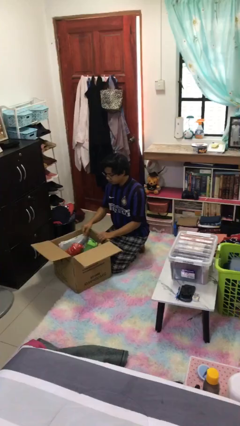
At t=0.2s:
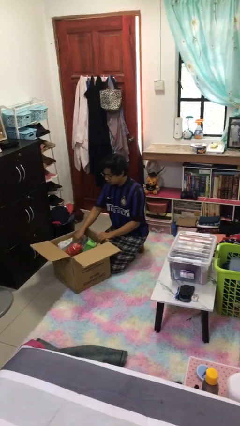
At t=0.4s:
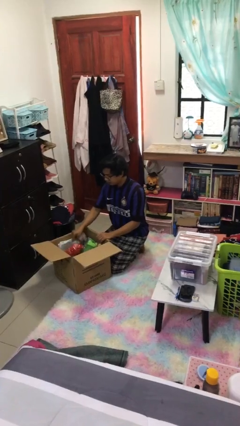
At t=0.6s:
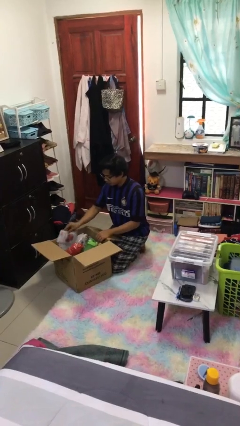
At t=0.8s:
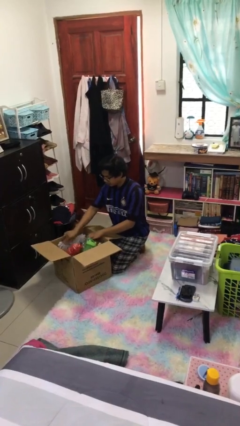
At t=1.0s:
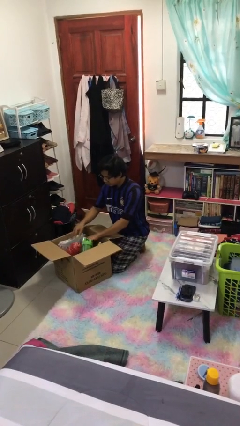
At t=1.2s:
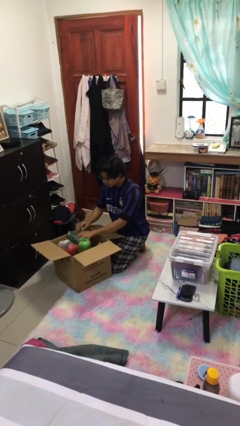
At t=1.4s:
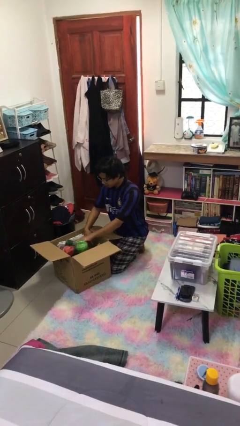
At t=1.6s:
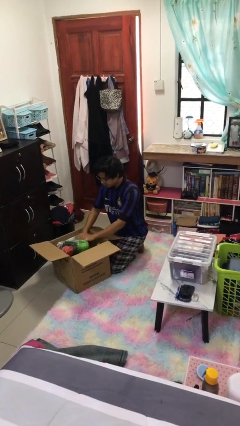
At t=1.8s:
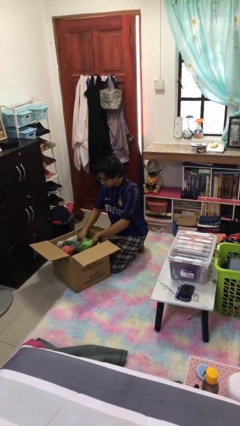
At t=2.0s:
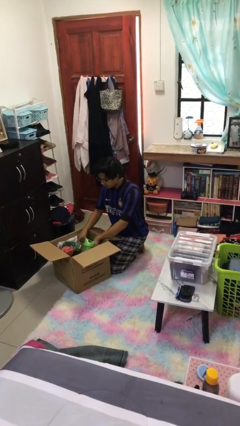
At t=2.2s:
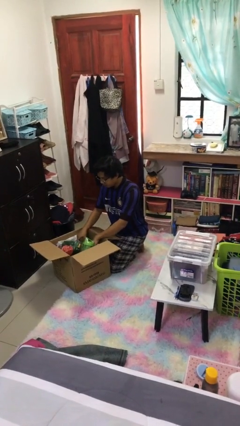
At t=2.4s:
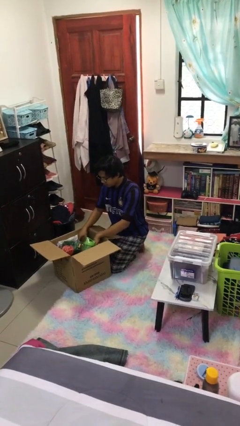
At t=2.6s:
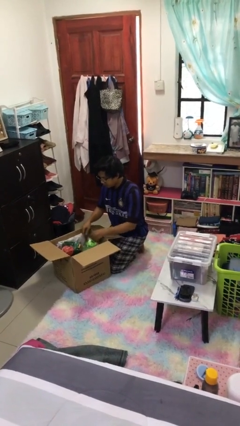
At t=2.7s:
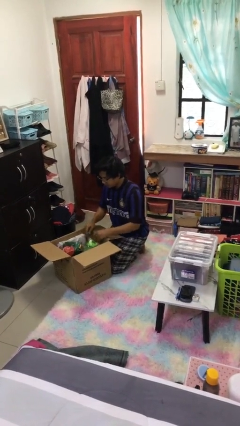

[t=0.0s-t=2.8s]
person searches in box

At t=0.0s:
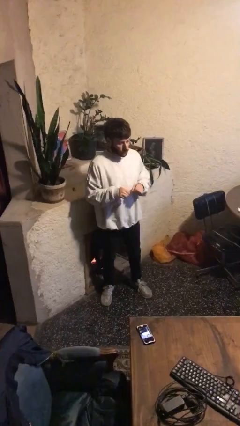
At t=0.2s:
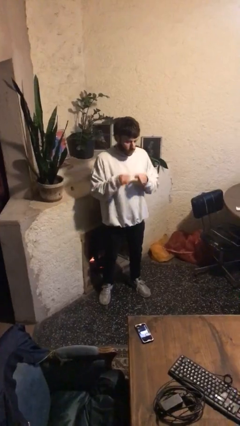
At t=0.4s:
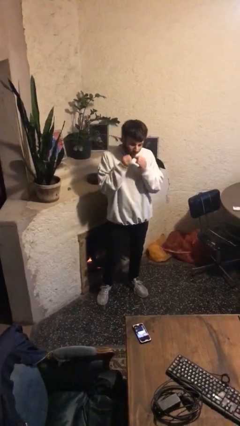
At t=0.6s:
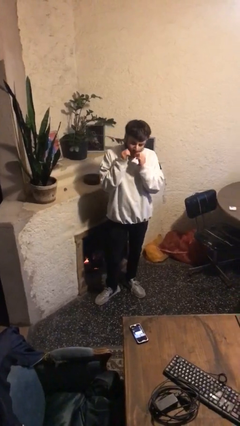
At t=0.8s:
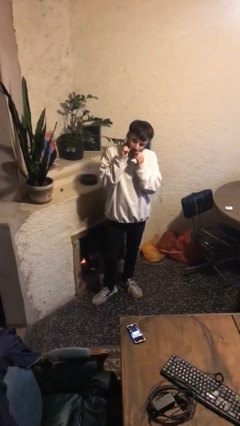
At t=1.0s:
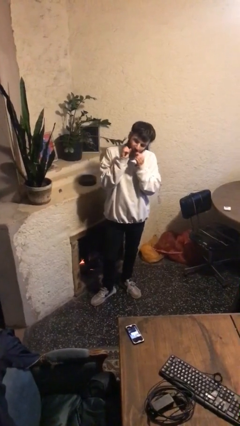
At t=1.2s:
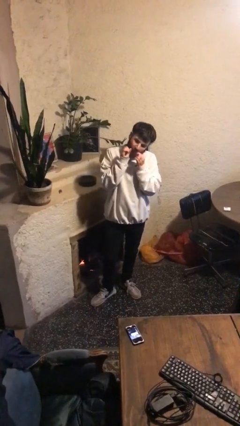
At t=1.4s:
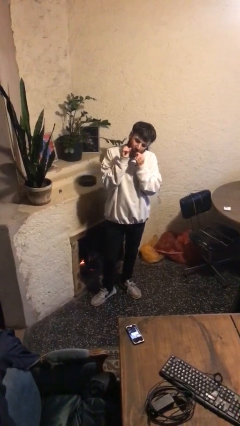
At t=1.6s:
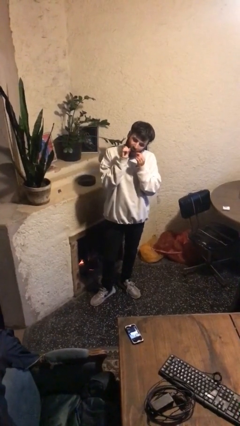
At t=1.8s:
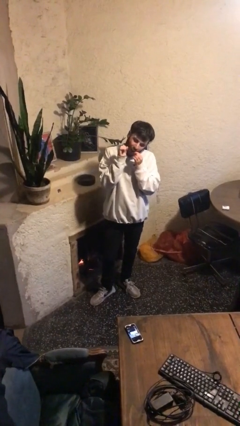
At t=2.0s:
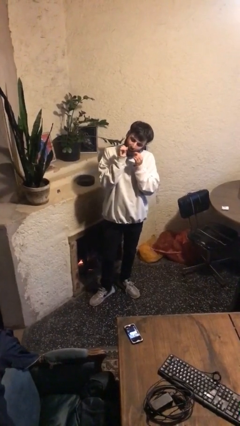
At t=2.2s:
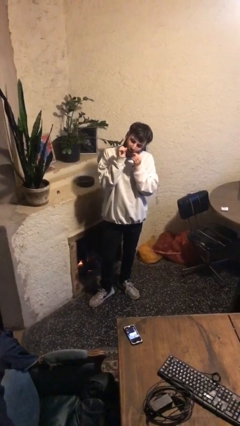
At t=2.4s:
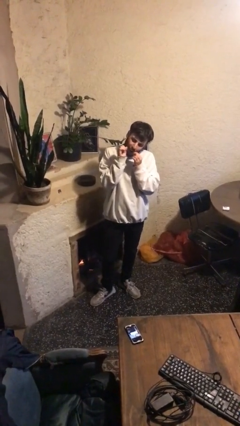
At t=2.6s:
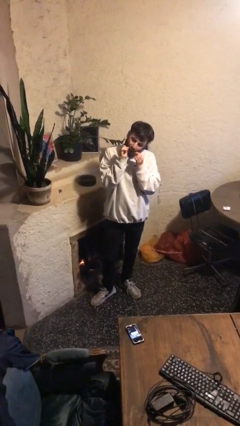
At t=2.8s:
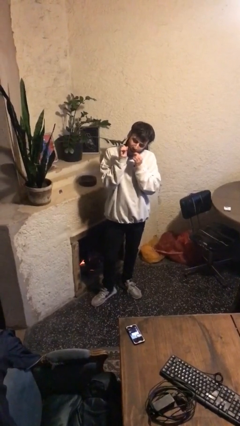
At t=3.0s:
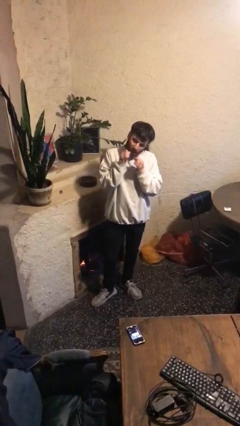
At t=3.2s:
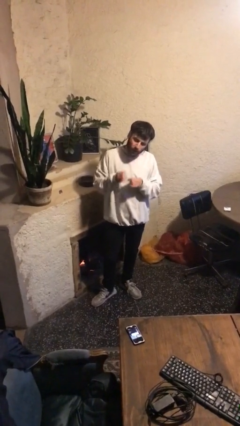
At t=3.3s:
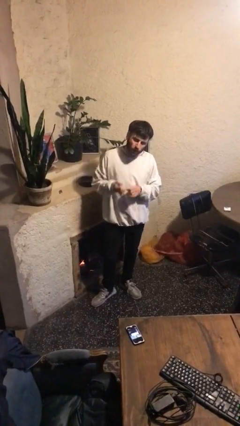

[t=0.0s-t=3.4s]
person flosses

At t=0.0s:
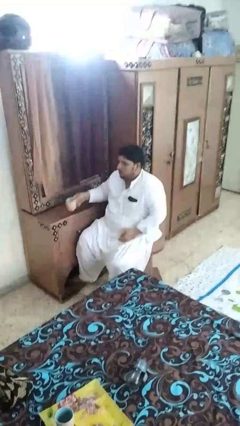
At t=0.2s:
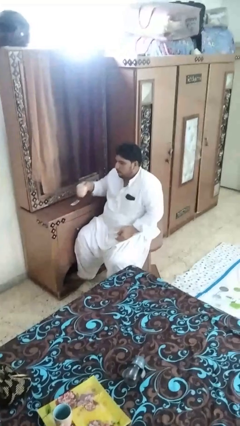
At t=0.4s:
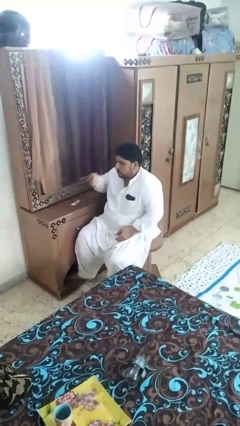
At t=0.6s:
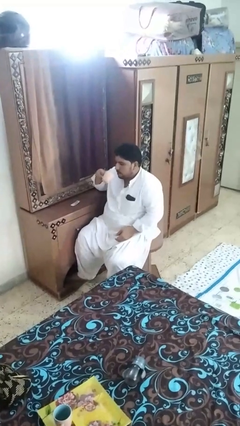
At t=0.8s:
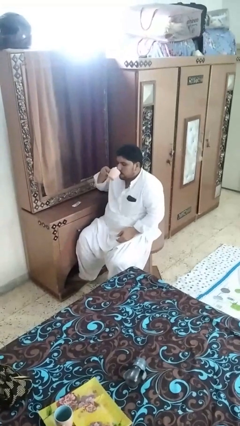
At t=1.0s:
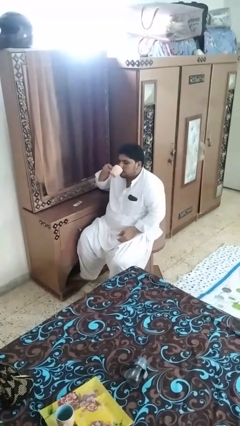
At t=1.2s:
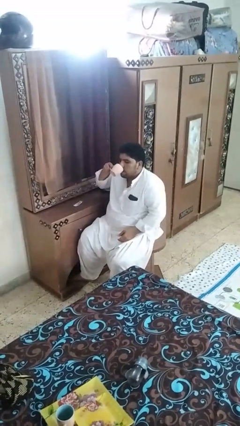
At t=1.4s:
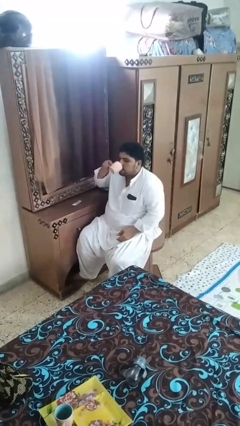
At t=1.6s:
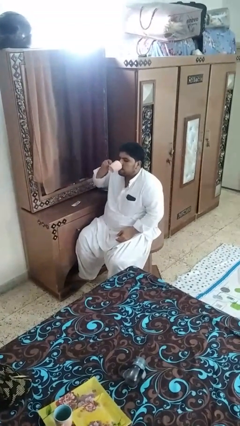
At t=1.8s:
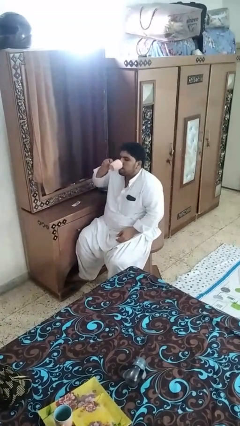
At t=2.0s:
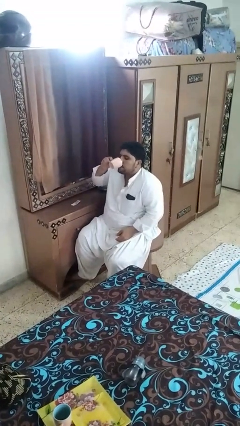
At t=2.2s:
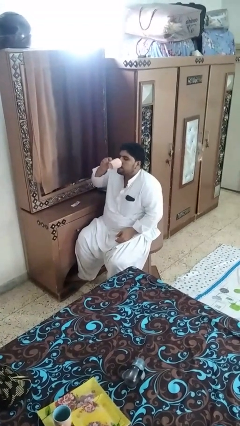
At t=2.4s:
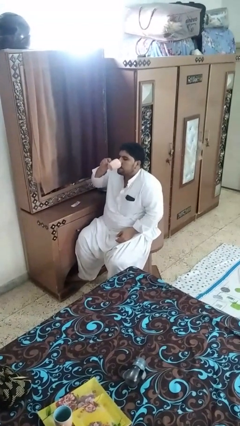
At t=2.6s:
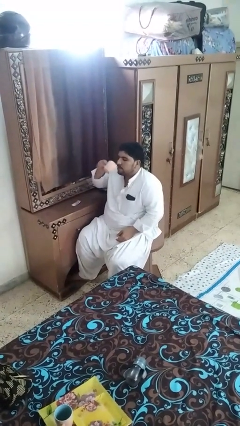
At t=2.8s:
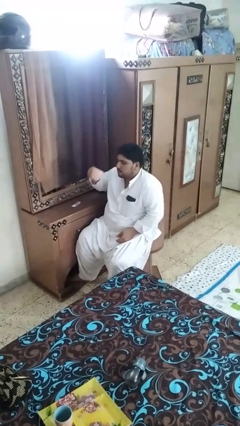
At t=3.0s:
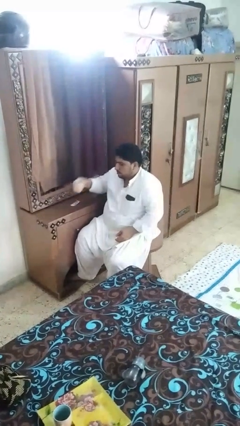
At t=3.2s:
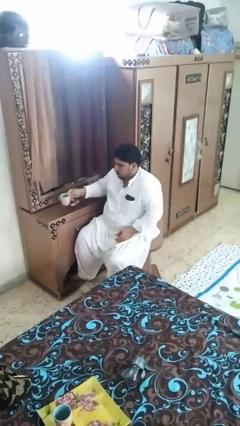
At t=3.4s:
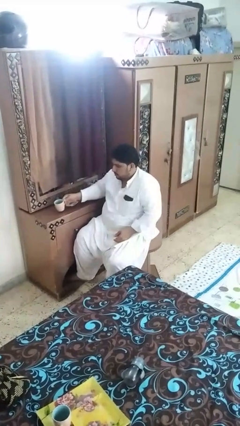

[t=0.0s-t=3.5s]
person drinks from cup

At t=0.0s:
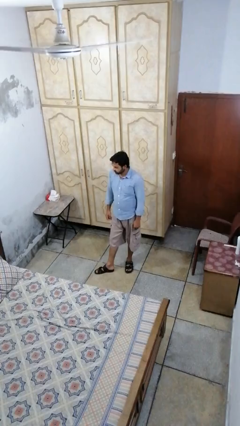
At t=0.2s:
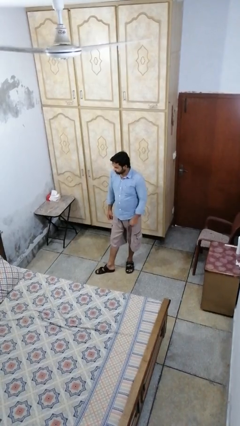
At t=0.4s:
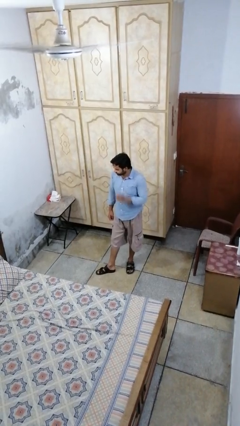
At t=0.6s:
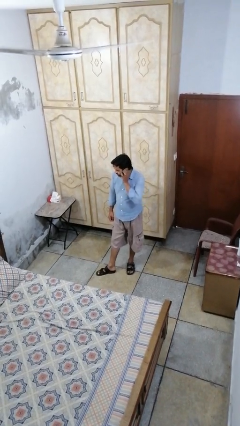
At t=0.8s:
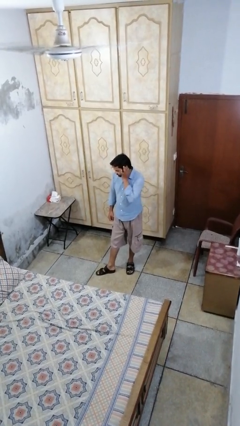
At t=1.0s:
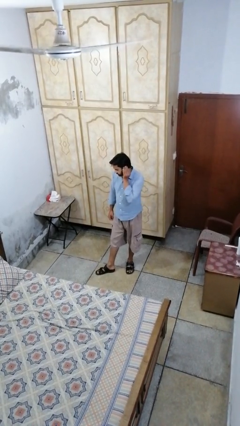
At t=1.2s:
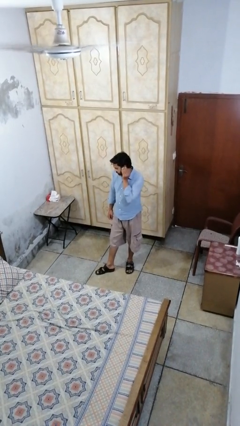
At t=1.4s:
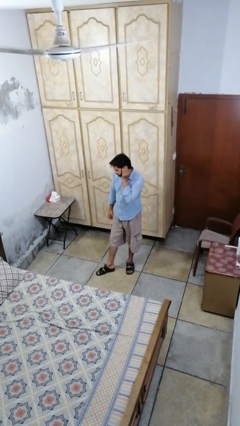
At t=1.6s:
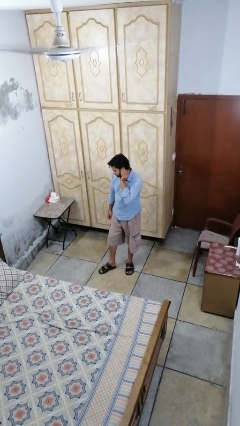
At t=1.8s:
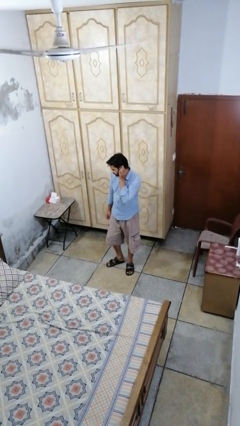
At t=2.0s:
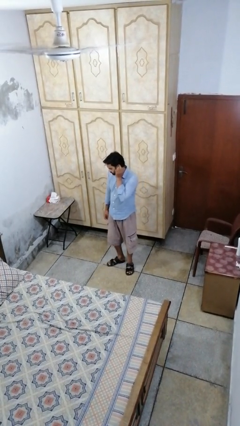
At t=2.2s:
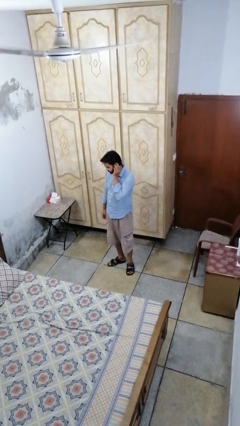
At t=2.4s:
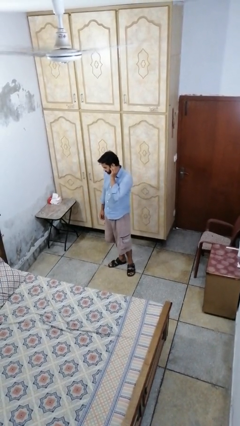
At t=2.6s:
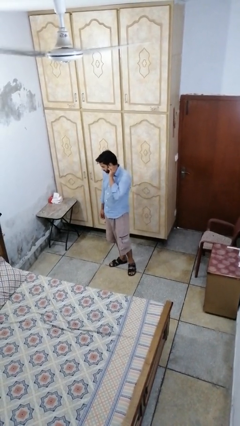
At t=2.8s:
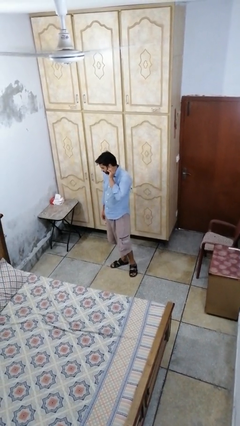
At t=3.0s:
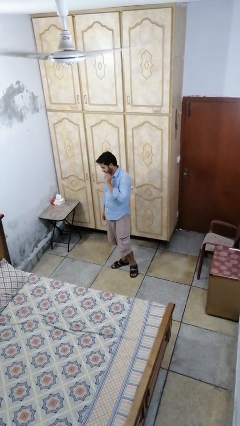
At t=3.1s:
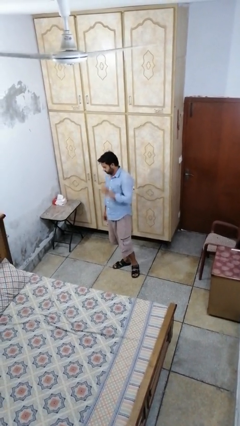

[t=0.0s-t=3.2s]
person touches earlobe

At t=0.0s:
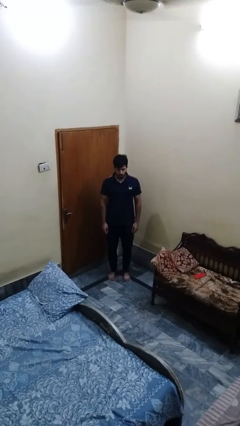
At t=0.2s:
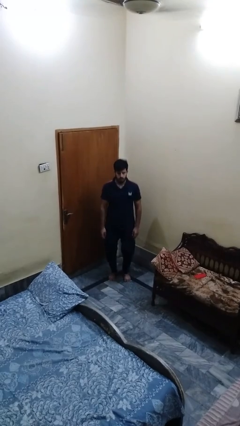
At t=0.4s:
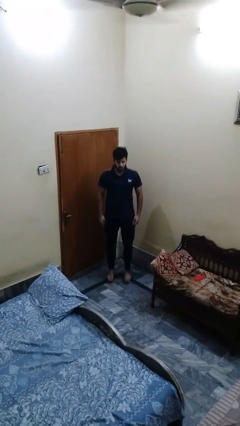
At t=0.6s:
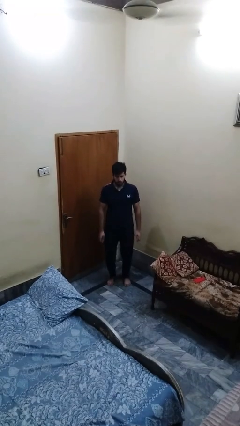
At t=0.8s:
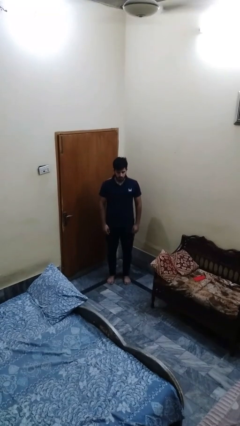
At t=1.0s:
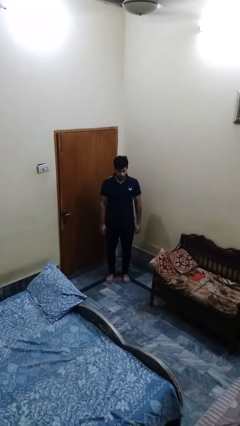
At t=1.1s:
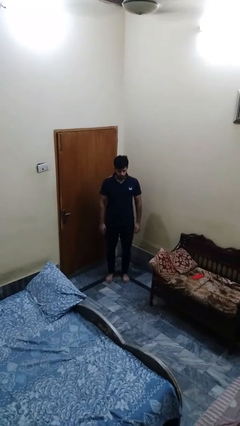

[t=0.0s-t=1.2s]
person jumps

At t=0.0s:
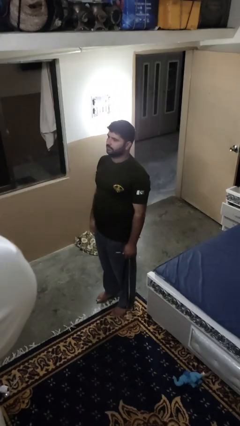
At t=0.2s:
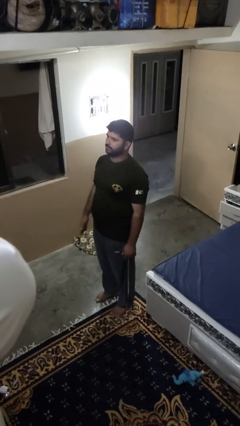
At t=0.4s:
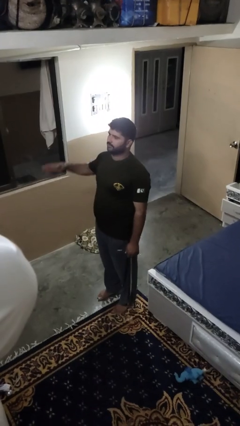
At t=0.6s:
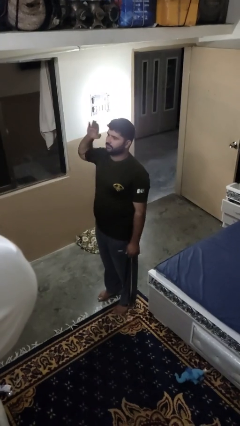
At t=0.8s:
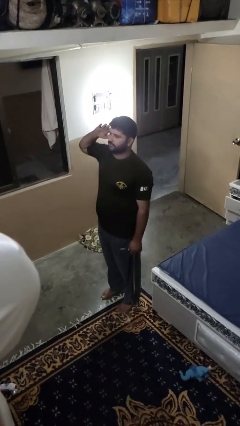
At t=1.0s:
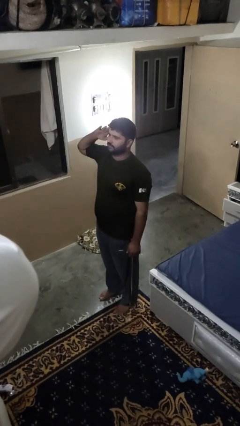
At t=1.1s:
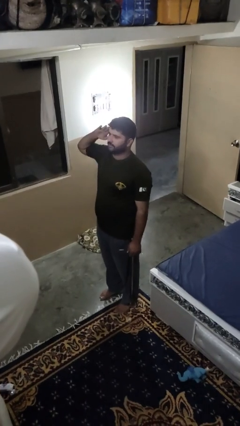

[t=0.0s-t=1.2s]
person salutes

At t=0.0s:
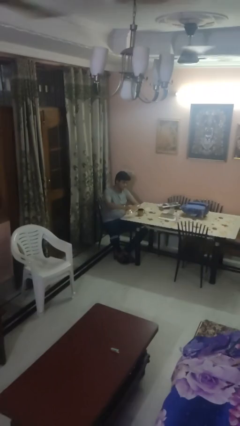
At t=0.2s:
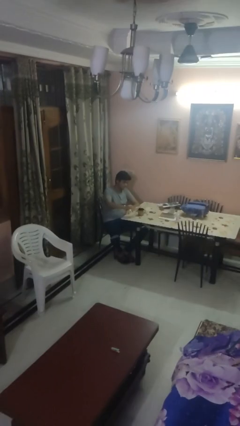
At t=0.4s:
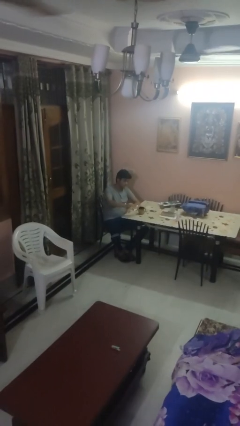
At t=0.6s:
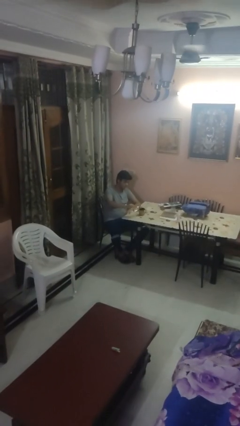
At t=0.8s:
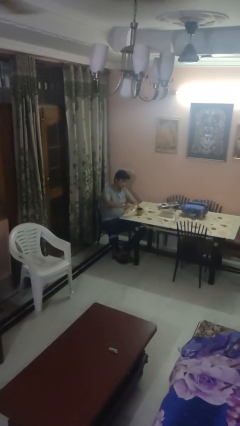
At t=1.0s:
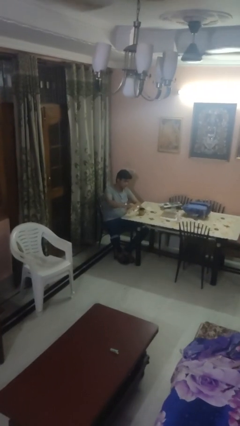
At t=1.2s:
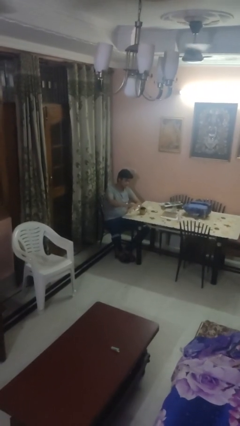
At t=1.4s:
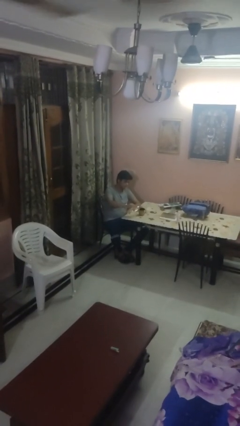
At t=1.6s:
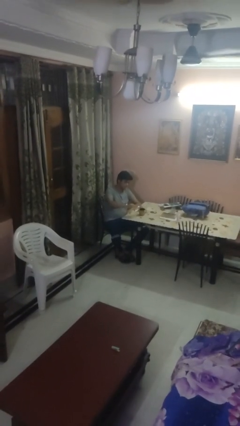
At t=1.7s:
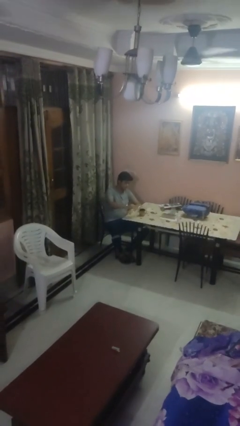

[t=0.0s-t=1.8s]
person pours liquid into cup
